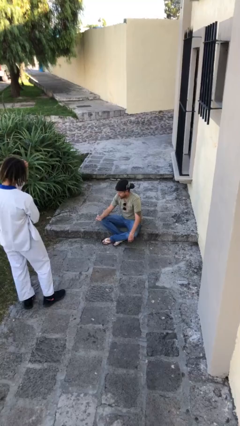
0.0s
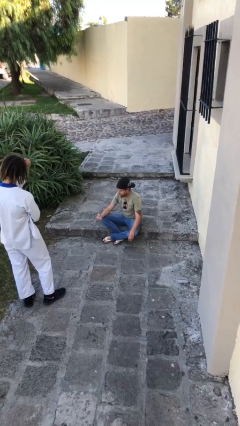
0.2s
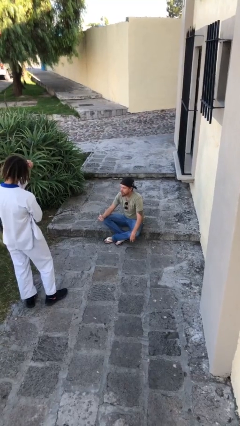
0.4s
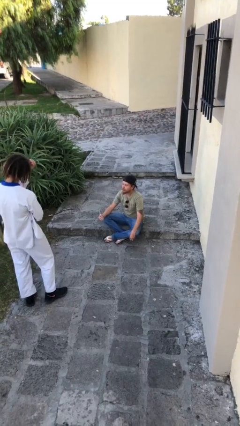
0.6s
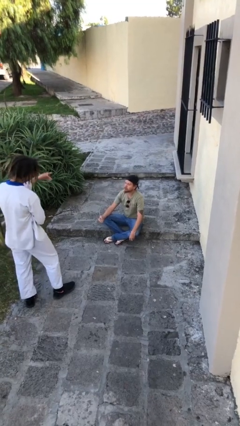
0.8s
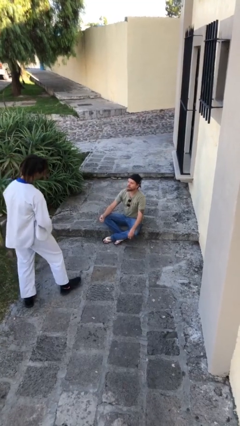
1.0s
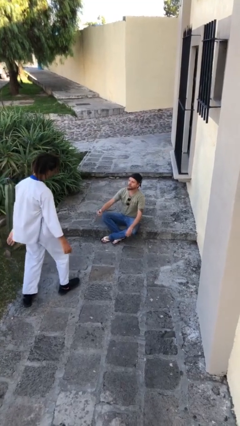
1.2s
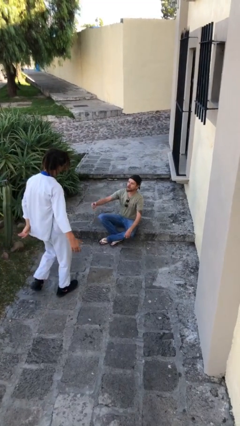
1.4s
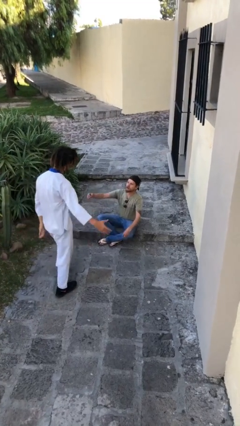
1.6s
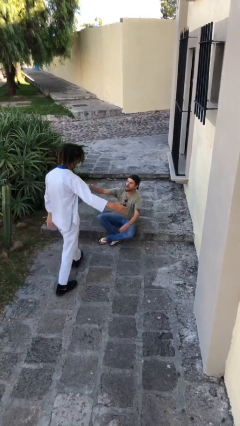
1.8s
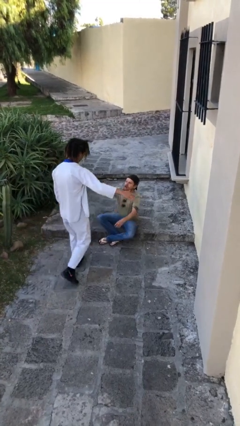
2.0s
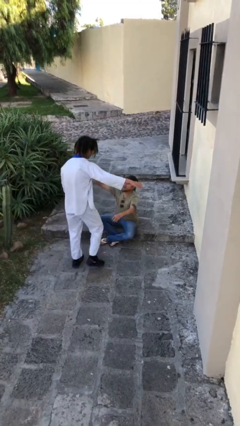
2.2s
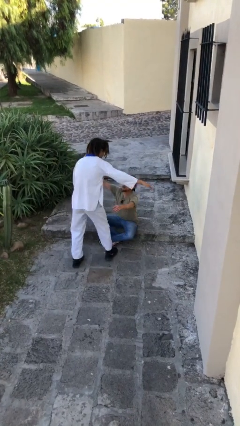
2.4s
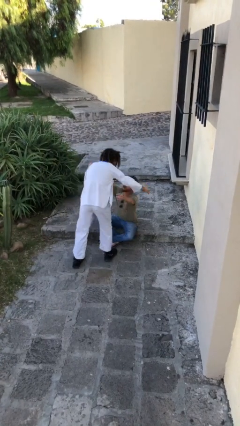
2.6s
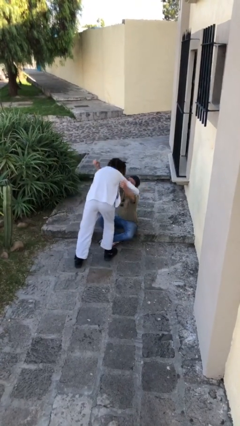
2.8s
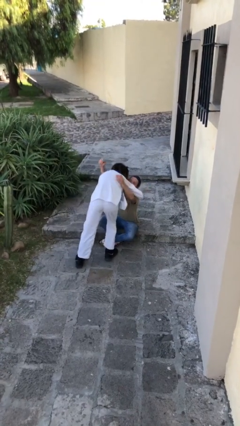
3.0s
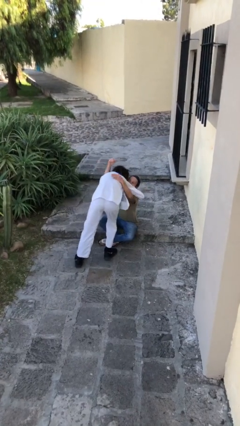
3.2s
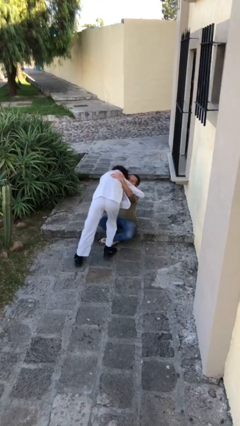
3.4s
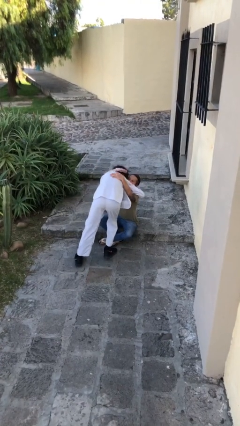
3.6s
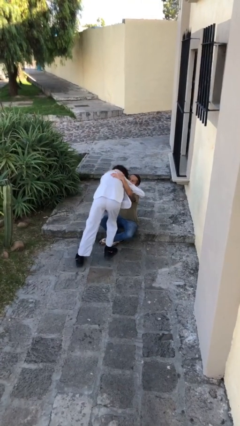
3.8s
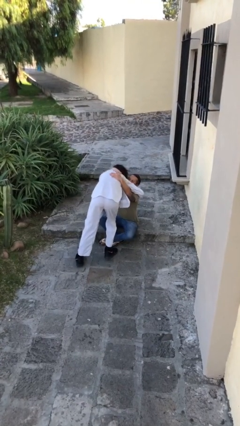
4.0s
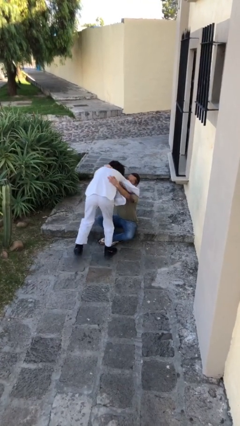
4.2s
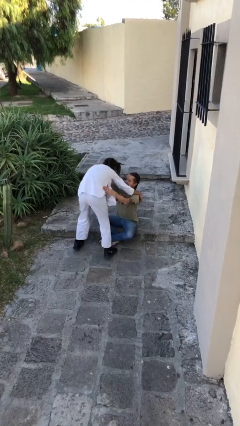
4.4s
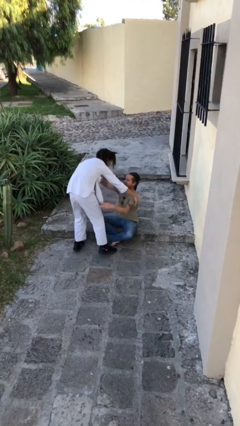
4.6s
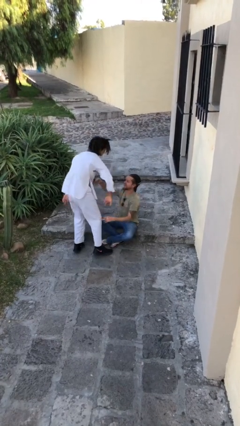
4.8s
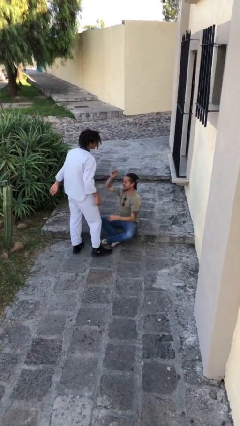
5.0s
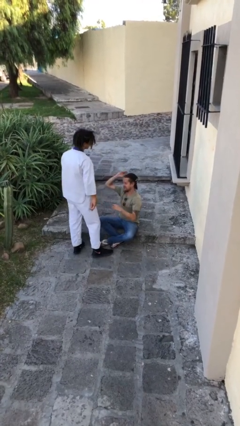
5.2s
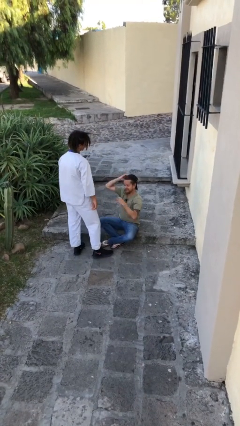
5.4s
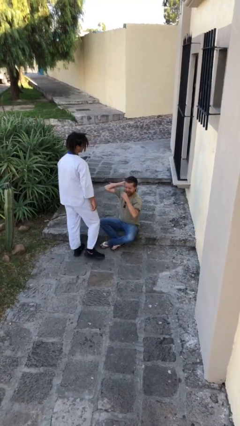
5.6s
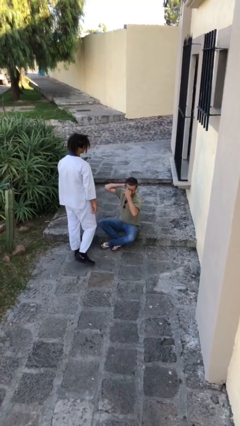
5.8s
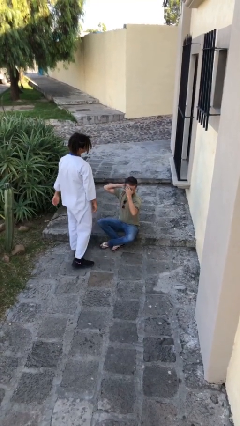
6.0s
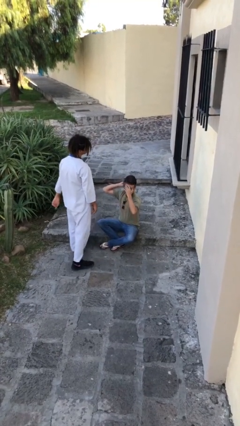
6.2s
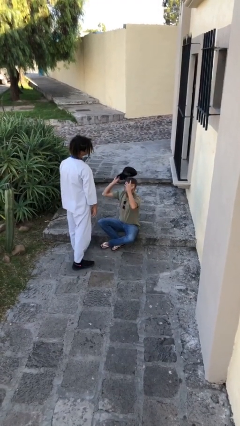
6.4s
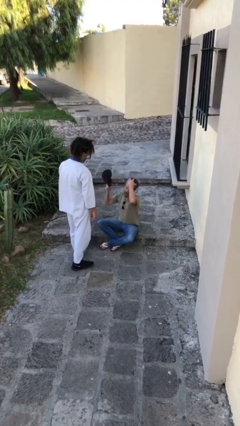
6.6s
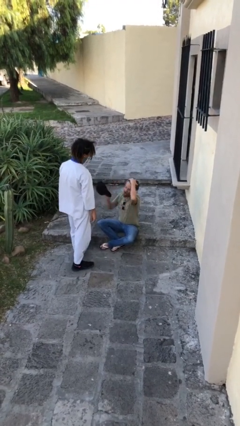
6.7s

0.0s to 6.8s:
person embraces person

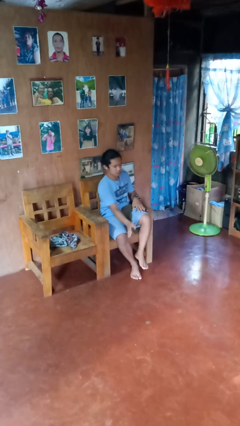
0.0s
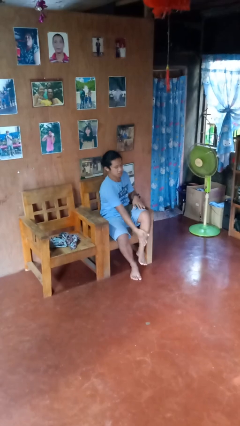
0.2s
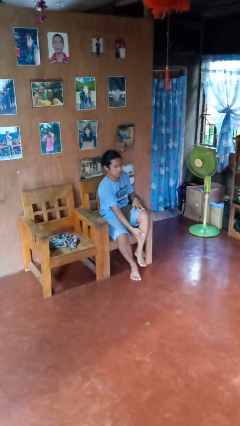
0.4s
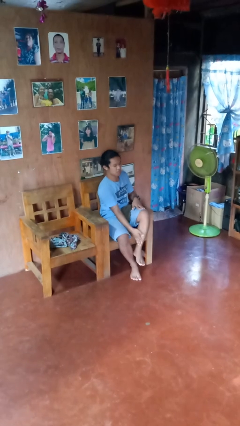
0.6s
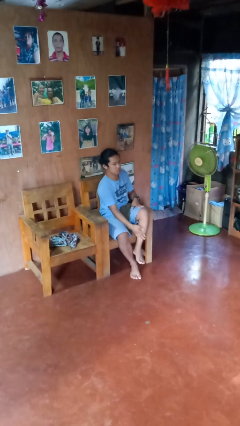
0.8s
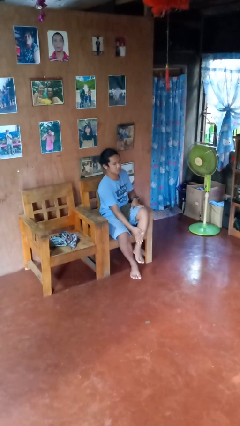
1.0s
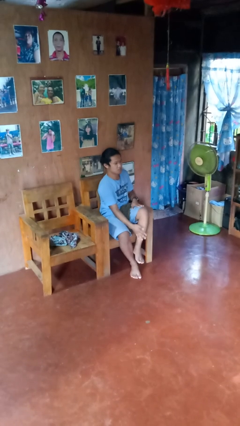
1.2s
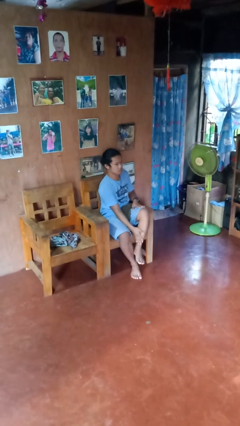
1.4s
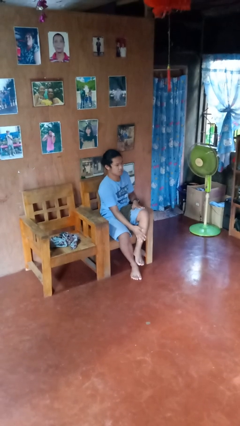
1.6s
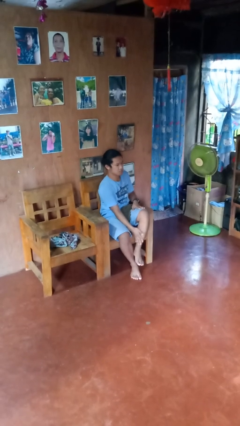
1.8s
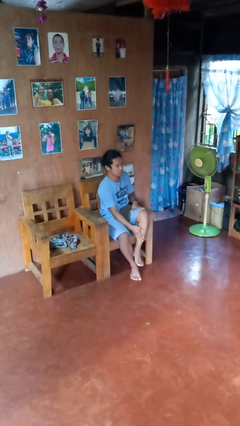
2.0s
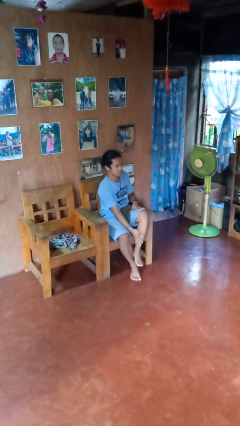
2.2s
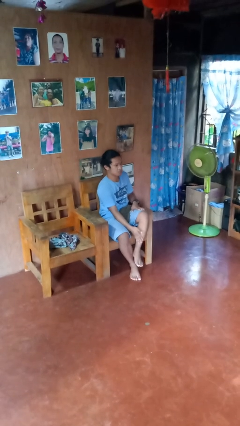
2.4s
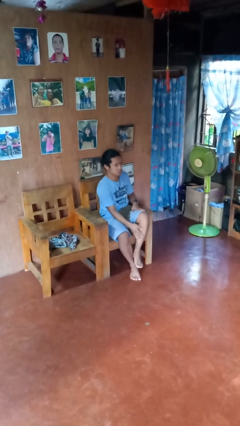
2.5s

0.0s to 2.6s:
person swats bug

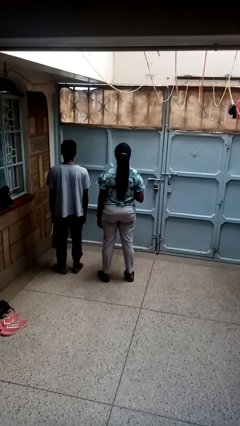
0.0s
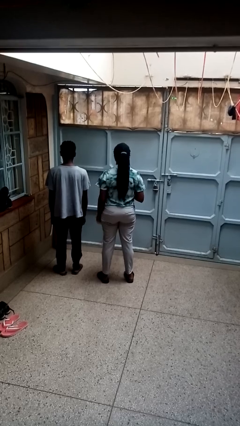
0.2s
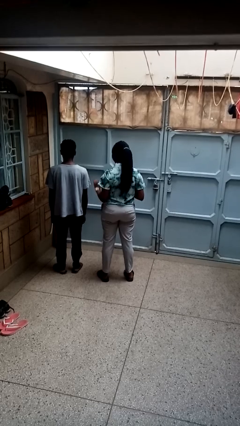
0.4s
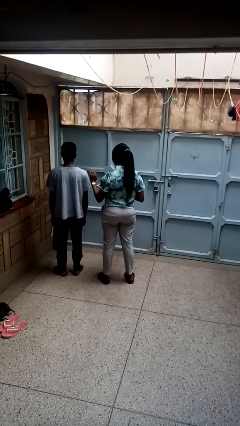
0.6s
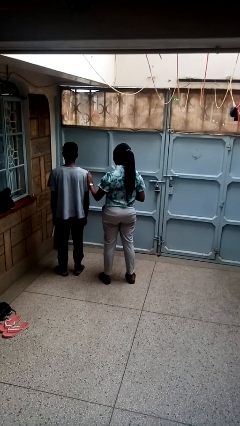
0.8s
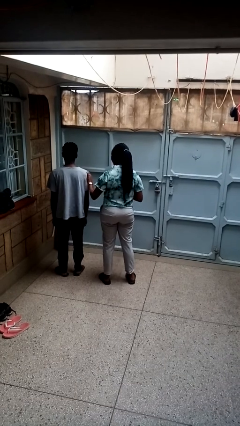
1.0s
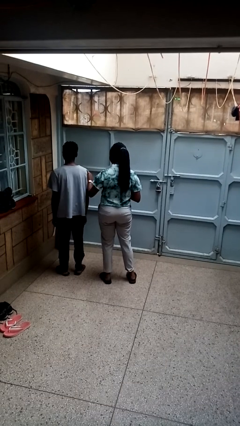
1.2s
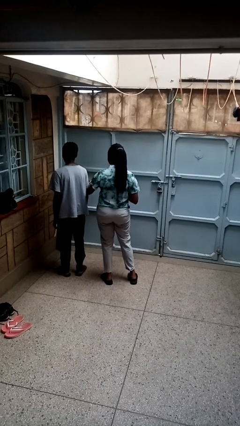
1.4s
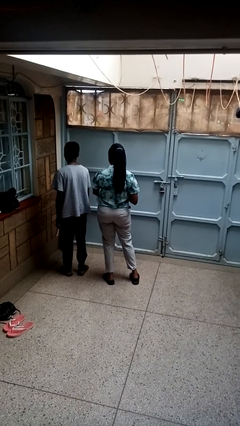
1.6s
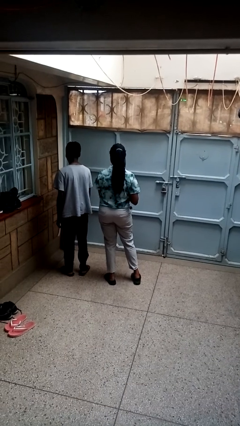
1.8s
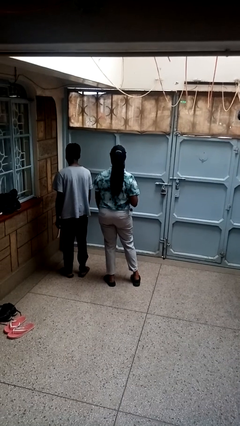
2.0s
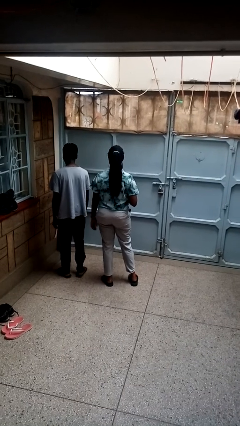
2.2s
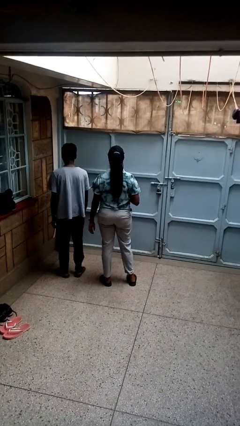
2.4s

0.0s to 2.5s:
person shoves person

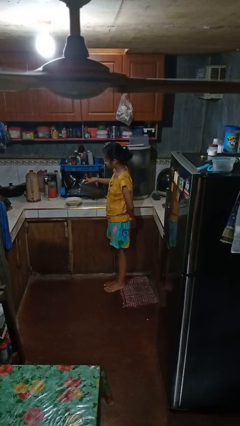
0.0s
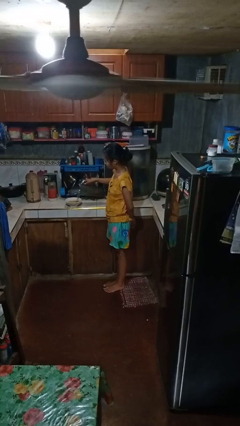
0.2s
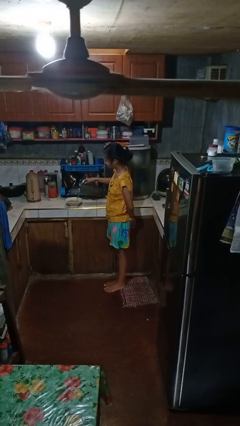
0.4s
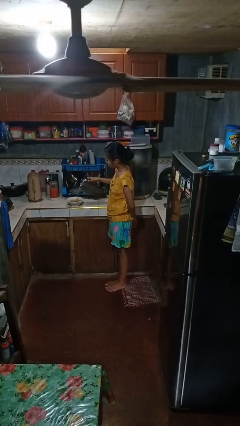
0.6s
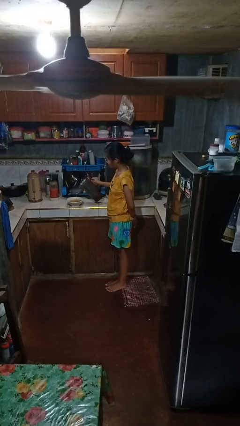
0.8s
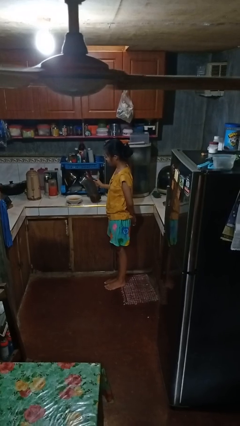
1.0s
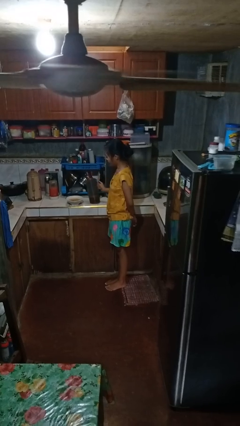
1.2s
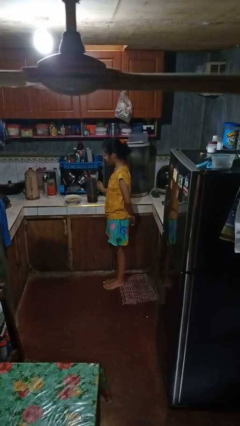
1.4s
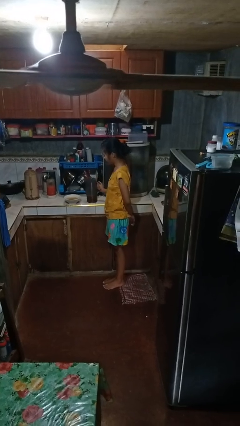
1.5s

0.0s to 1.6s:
person pours into bowl

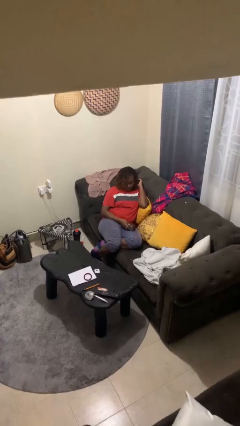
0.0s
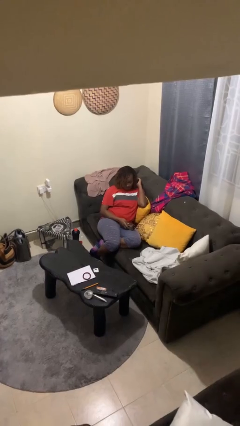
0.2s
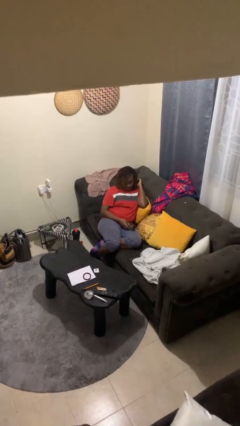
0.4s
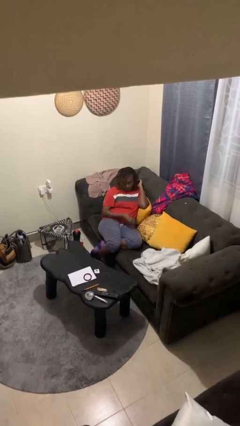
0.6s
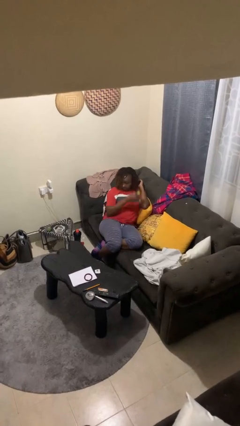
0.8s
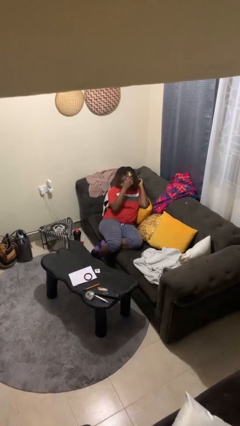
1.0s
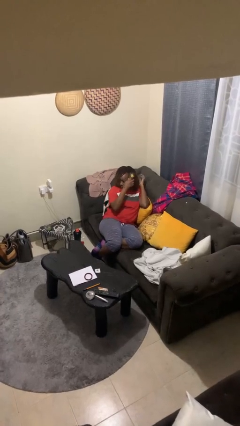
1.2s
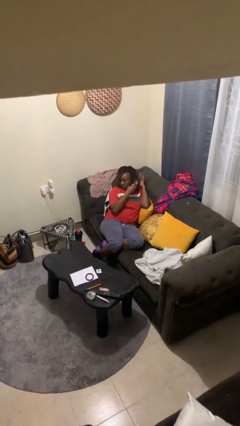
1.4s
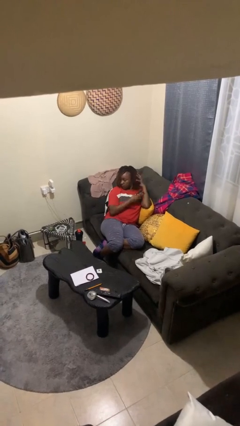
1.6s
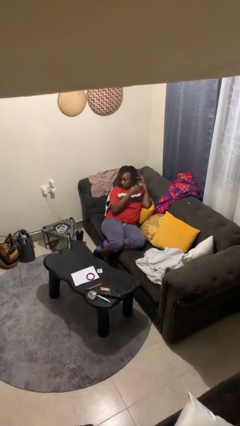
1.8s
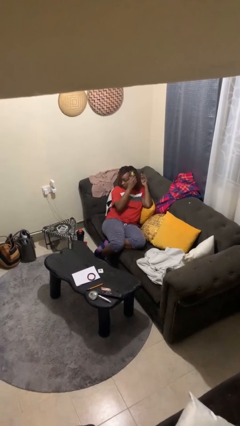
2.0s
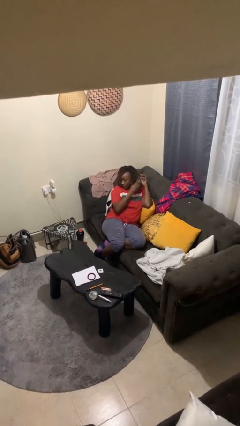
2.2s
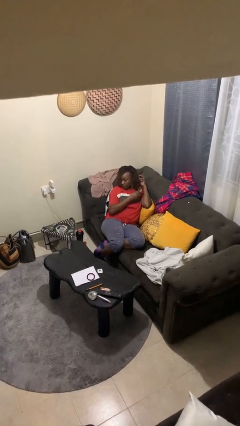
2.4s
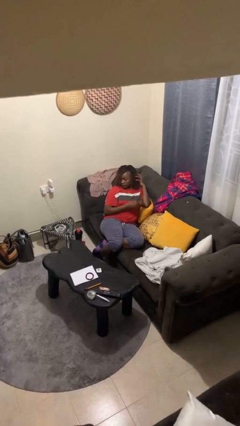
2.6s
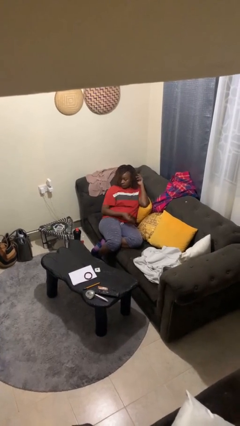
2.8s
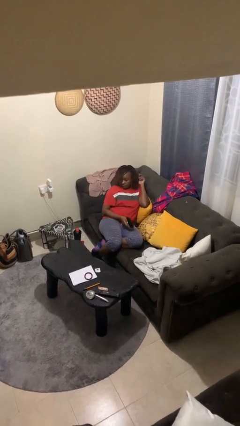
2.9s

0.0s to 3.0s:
person brushes hair

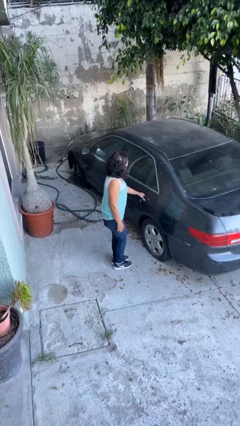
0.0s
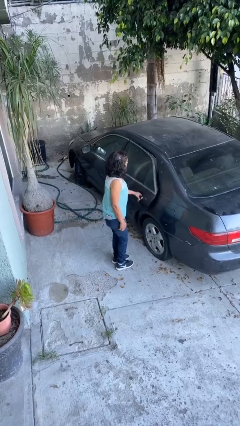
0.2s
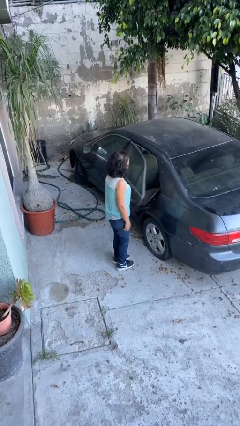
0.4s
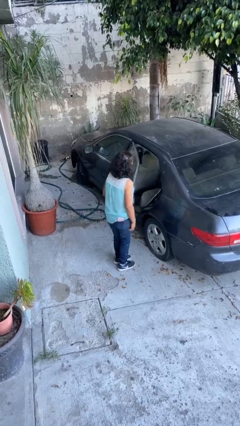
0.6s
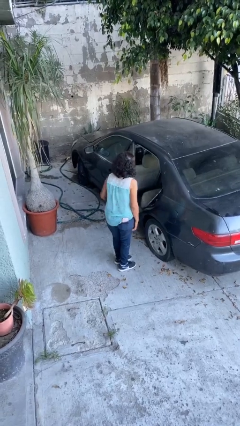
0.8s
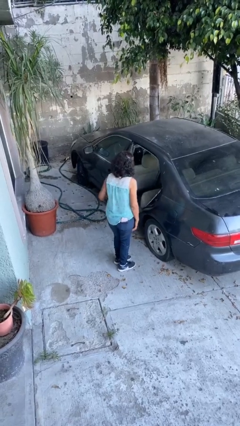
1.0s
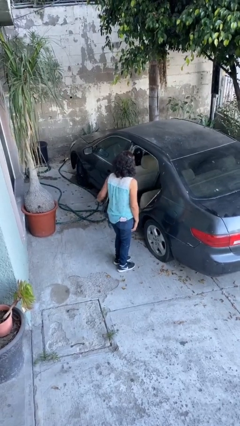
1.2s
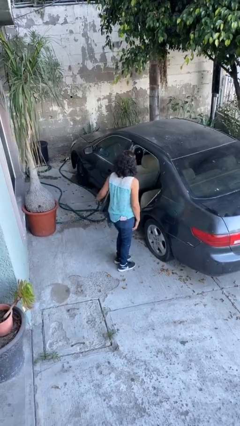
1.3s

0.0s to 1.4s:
person opens car door
